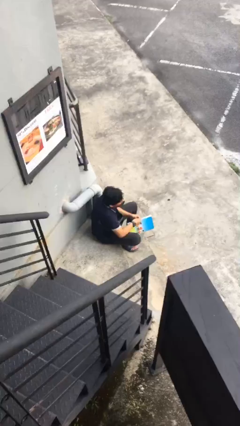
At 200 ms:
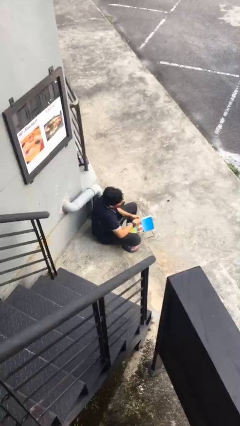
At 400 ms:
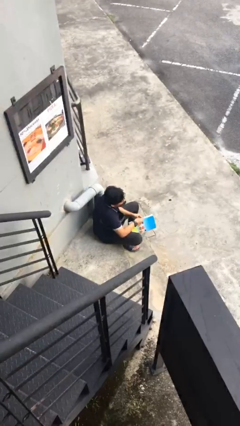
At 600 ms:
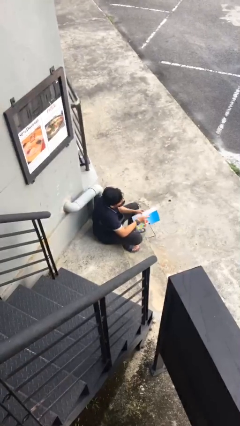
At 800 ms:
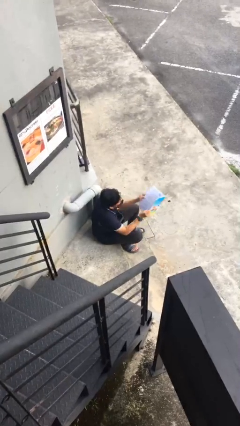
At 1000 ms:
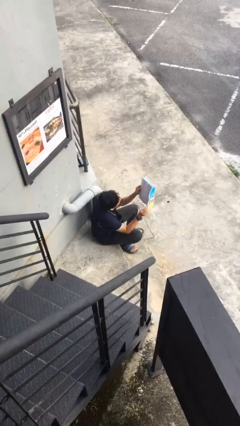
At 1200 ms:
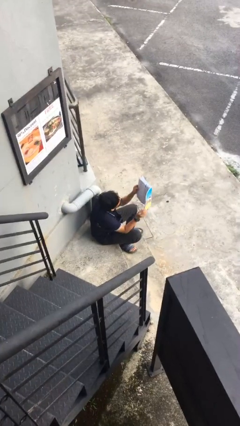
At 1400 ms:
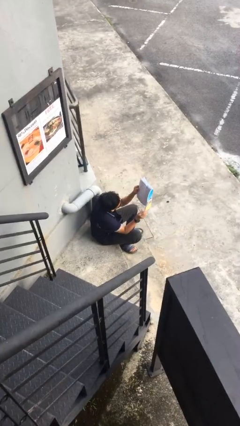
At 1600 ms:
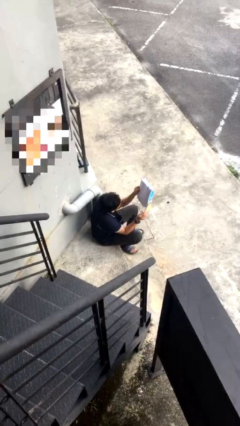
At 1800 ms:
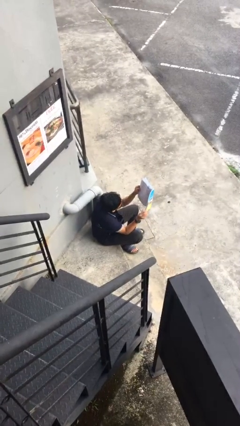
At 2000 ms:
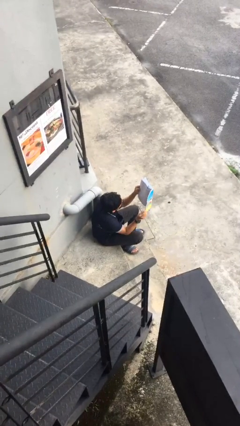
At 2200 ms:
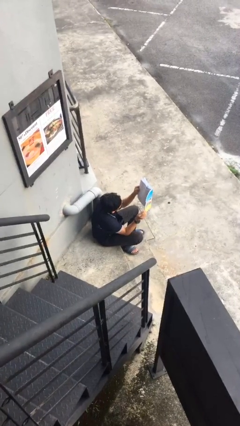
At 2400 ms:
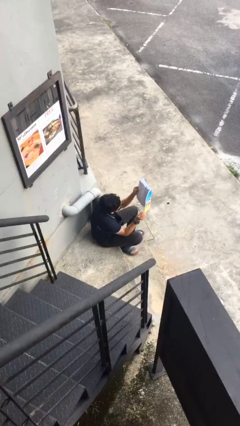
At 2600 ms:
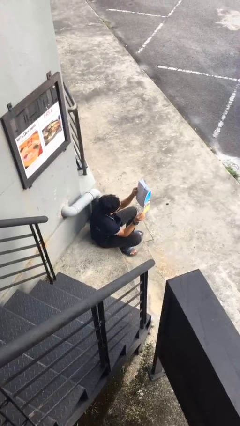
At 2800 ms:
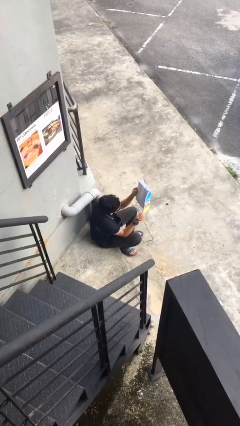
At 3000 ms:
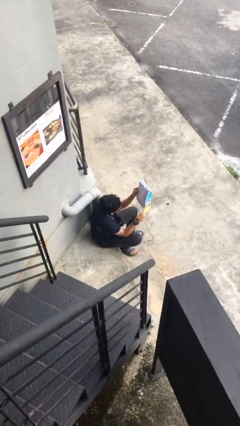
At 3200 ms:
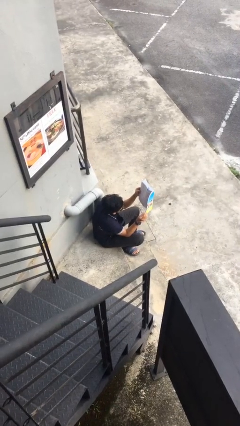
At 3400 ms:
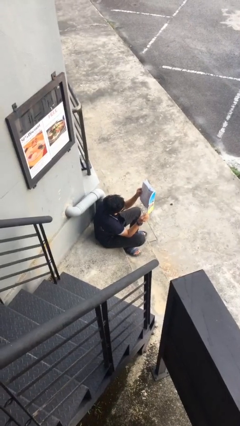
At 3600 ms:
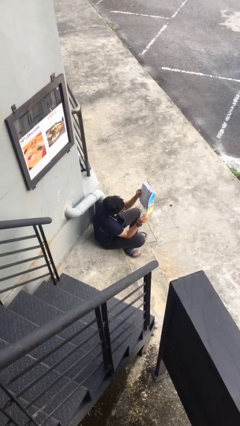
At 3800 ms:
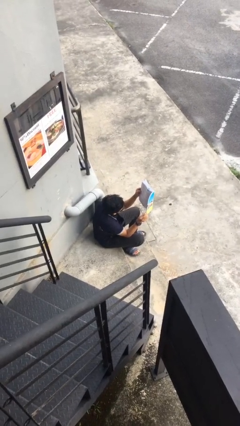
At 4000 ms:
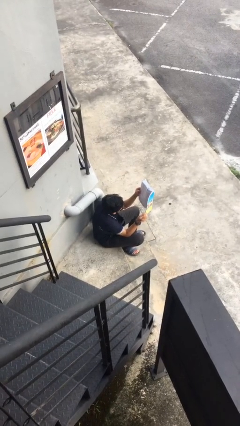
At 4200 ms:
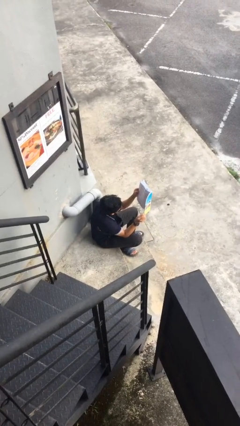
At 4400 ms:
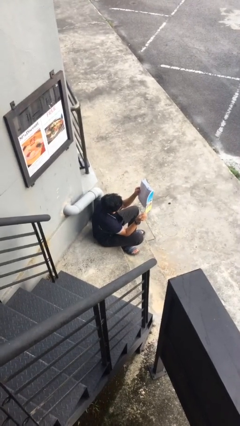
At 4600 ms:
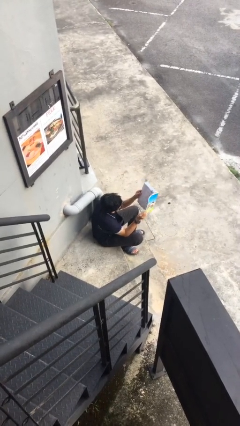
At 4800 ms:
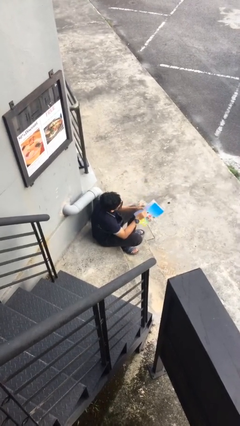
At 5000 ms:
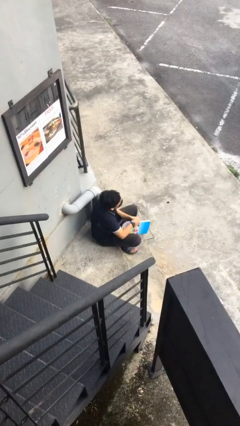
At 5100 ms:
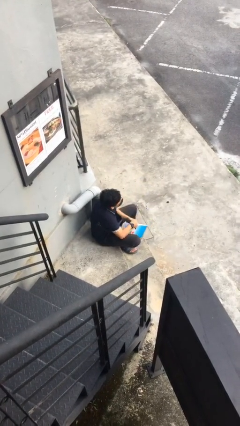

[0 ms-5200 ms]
person reads document

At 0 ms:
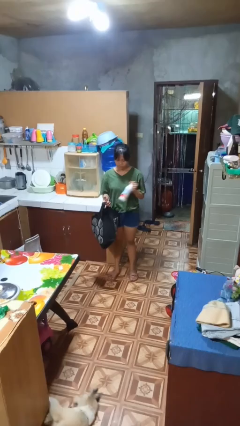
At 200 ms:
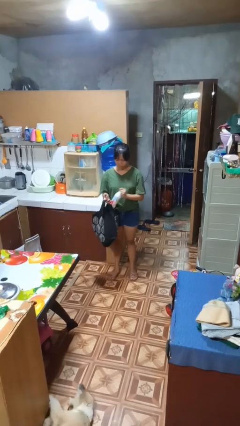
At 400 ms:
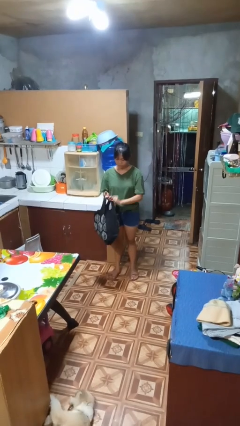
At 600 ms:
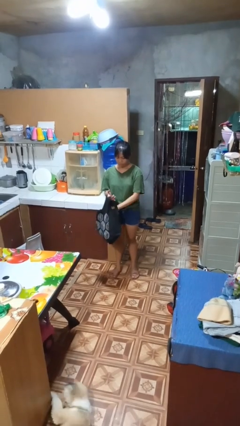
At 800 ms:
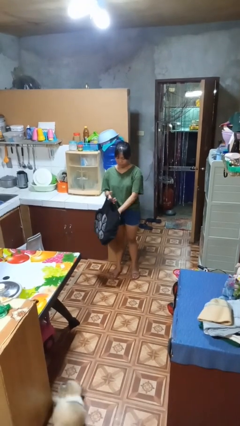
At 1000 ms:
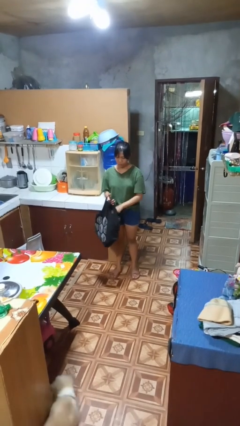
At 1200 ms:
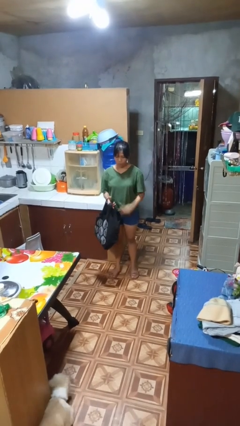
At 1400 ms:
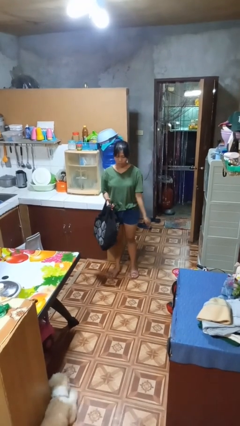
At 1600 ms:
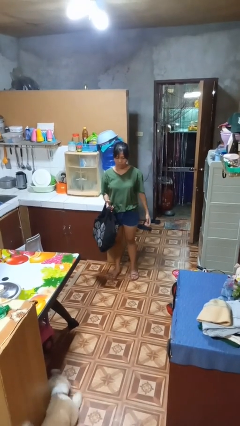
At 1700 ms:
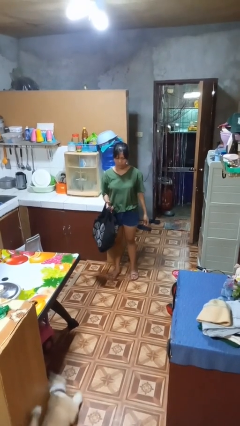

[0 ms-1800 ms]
person puts object into bag

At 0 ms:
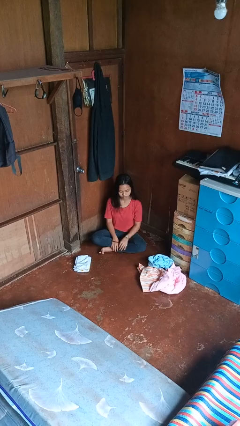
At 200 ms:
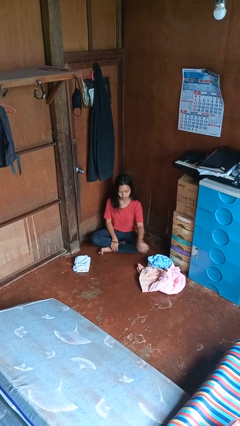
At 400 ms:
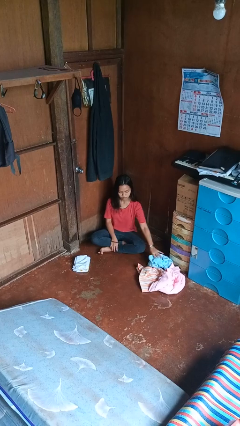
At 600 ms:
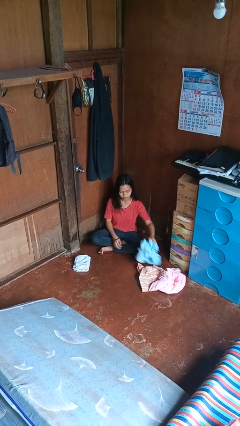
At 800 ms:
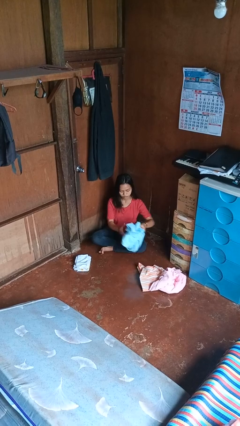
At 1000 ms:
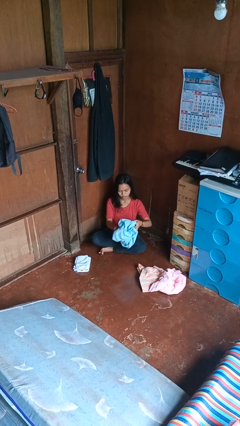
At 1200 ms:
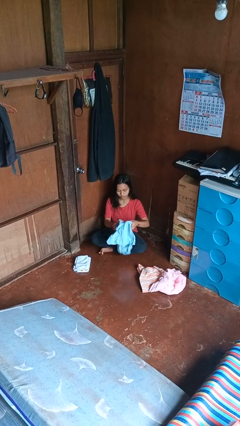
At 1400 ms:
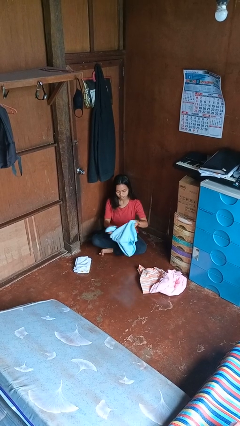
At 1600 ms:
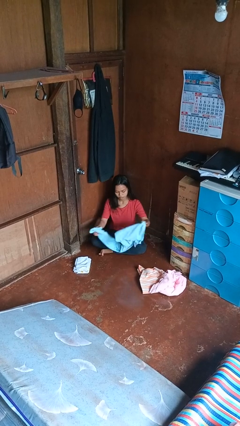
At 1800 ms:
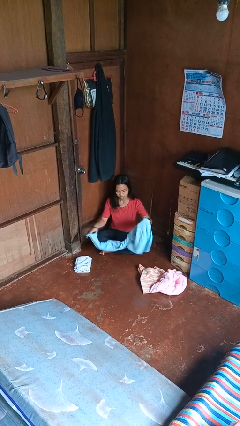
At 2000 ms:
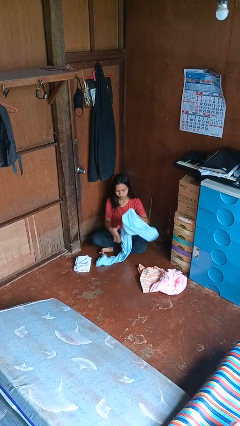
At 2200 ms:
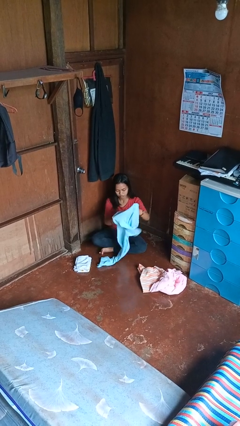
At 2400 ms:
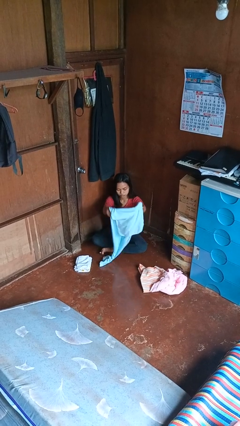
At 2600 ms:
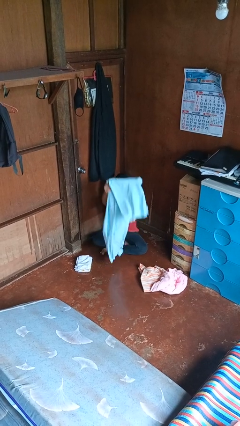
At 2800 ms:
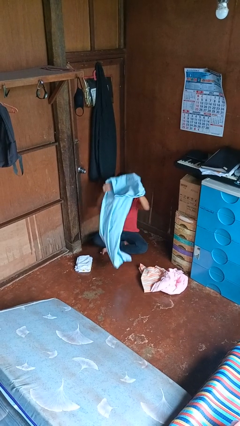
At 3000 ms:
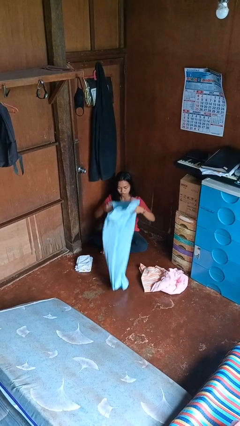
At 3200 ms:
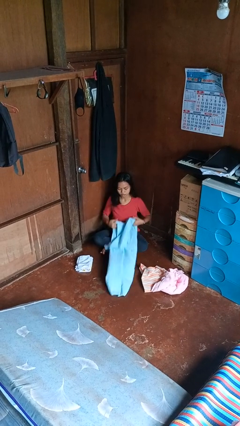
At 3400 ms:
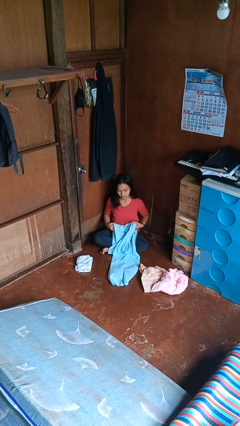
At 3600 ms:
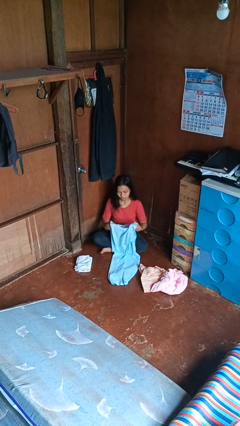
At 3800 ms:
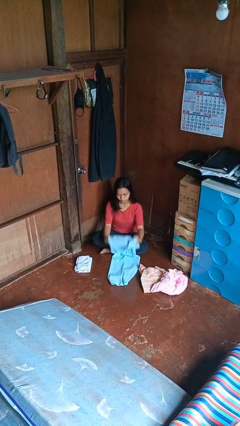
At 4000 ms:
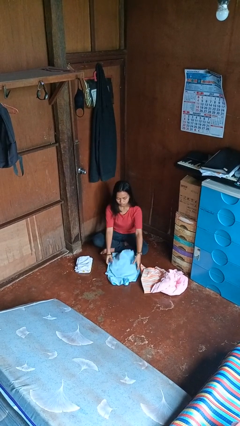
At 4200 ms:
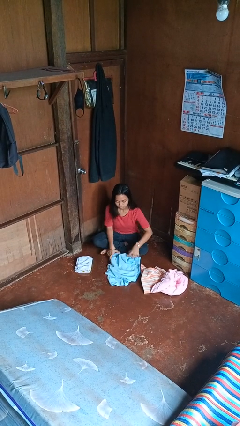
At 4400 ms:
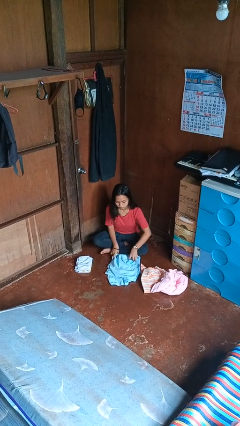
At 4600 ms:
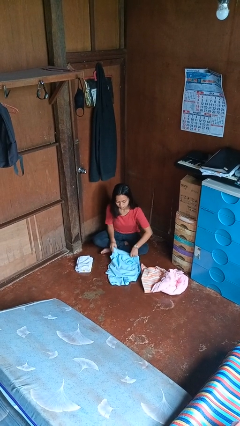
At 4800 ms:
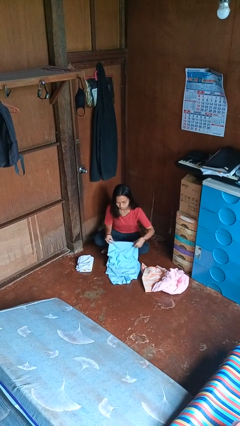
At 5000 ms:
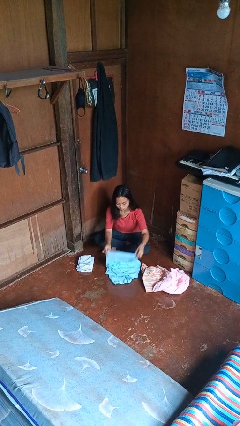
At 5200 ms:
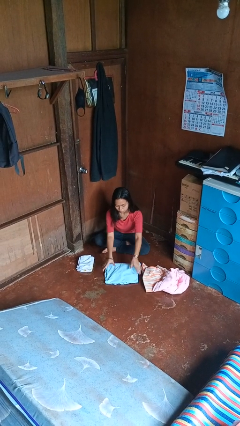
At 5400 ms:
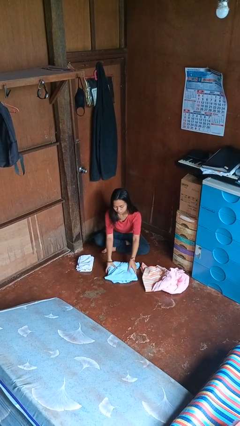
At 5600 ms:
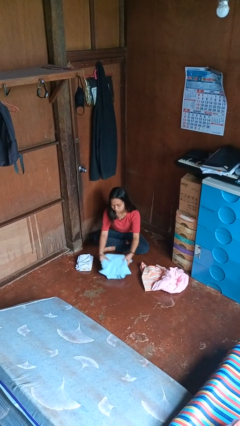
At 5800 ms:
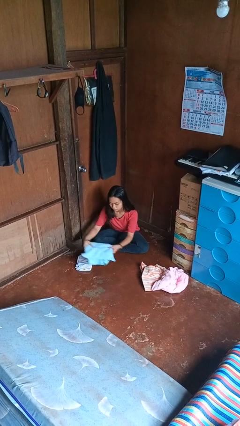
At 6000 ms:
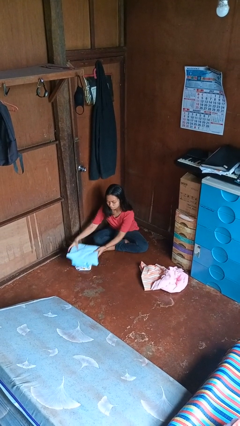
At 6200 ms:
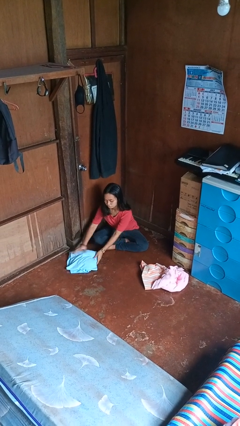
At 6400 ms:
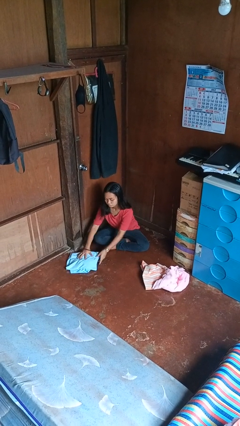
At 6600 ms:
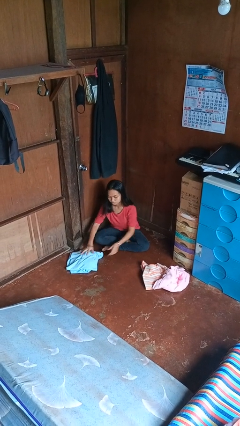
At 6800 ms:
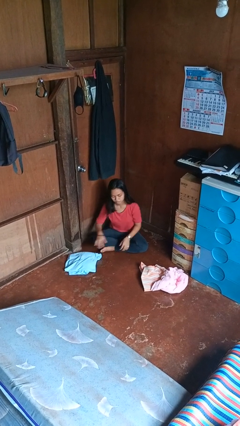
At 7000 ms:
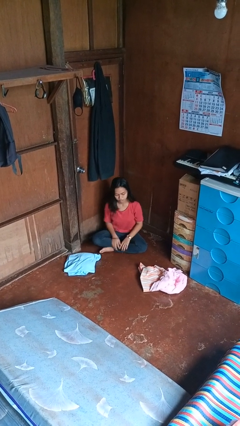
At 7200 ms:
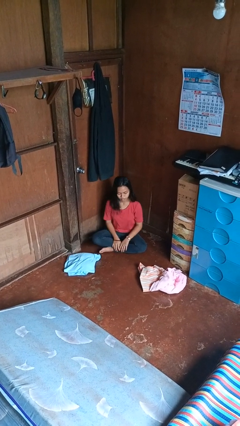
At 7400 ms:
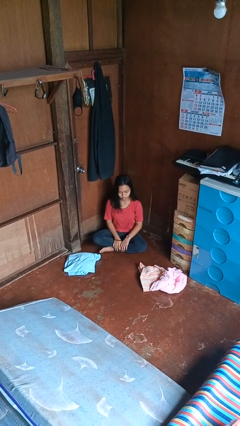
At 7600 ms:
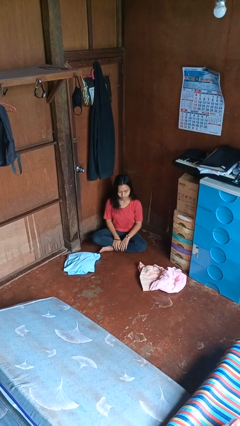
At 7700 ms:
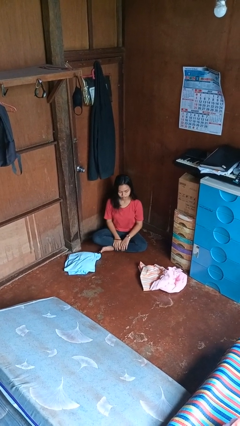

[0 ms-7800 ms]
person folds towel

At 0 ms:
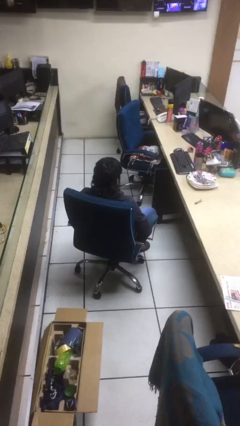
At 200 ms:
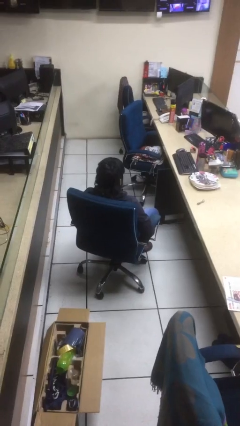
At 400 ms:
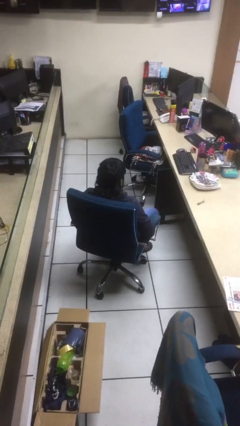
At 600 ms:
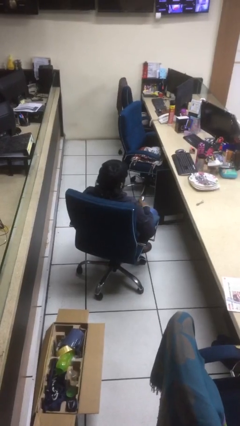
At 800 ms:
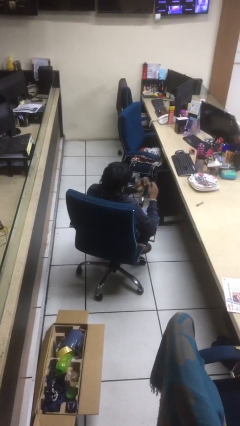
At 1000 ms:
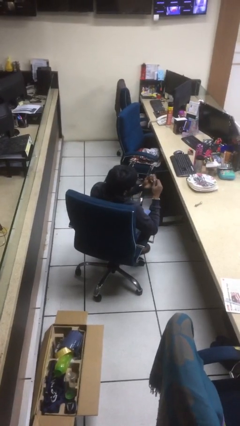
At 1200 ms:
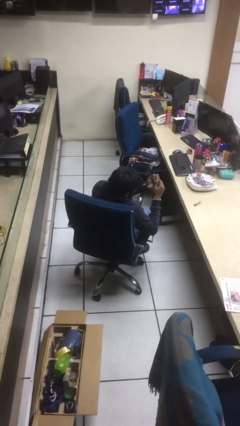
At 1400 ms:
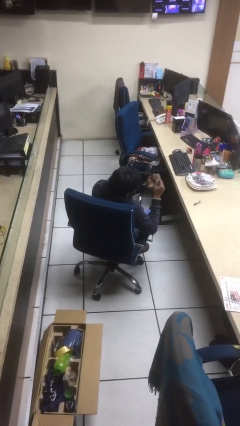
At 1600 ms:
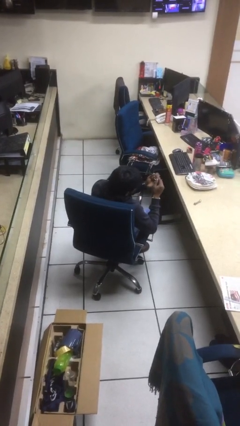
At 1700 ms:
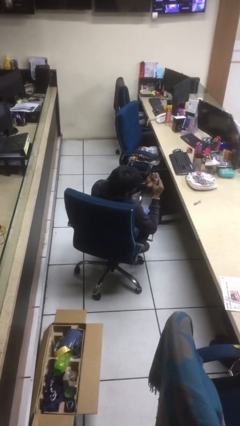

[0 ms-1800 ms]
person files fingernails

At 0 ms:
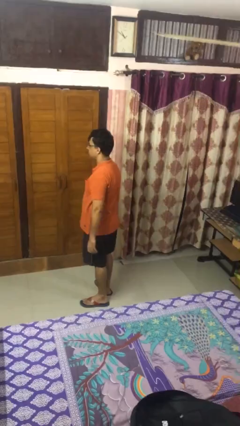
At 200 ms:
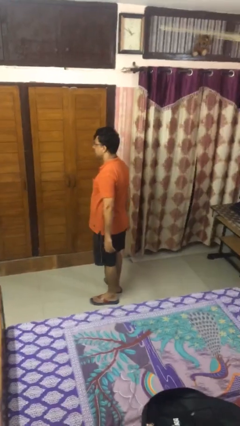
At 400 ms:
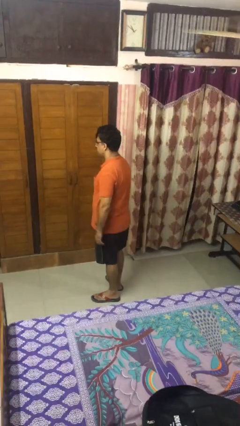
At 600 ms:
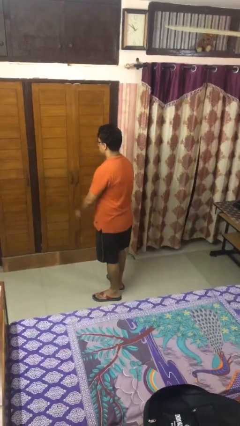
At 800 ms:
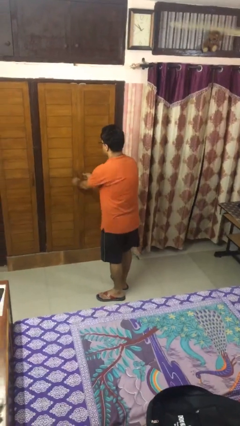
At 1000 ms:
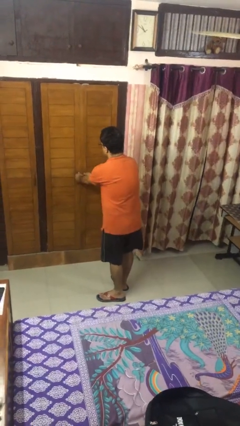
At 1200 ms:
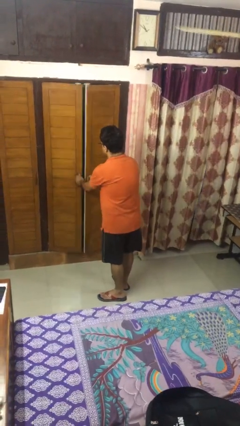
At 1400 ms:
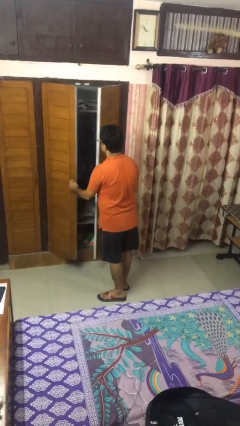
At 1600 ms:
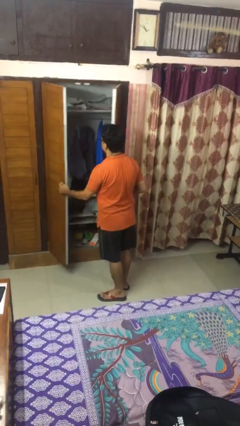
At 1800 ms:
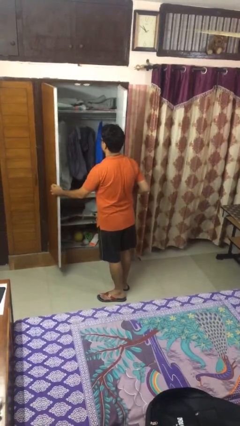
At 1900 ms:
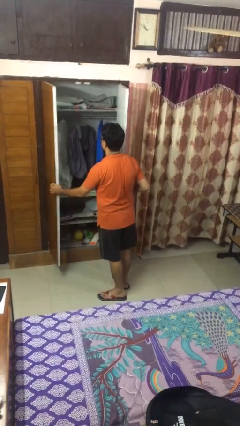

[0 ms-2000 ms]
person opens closet door
